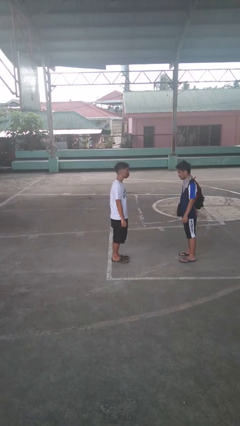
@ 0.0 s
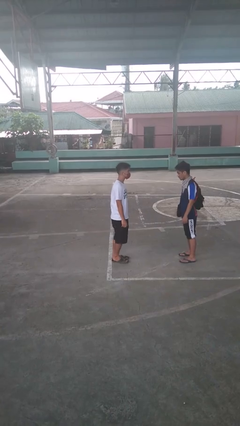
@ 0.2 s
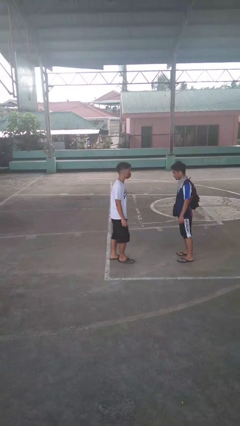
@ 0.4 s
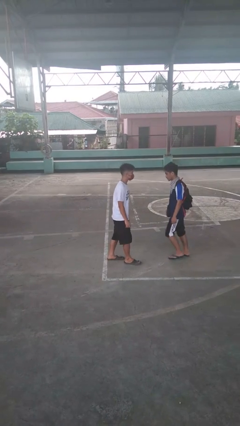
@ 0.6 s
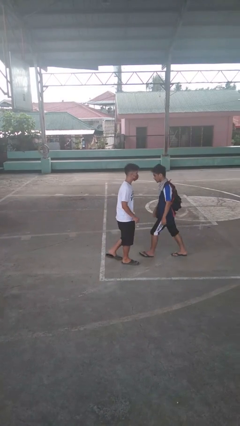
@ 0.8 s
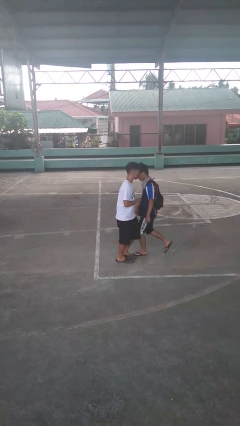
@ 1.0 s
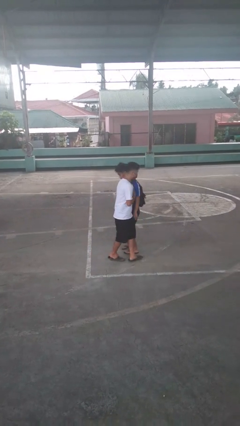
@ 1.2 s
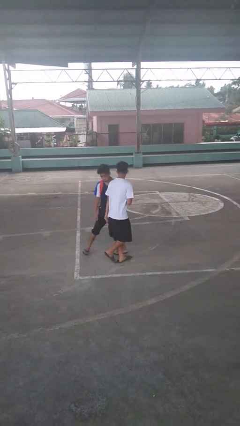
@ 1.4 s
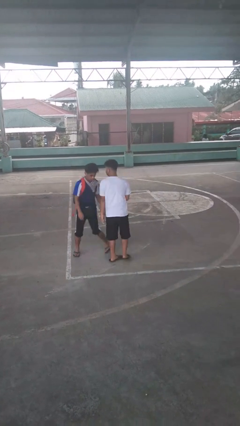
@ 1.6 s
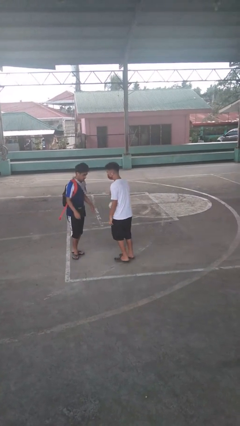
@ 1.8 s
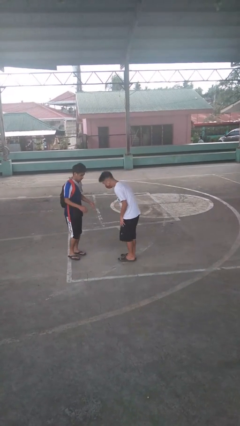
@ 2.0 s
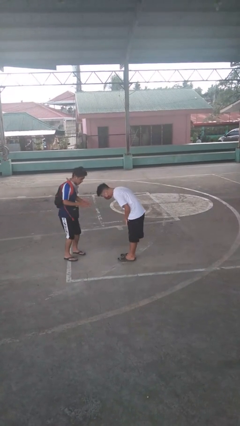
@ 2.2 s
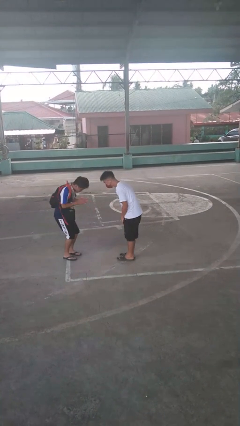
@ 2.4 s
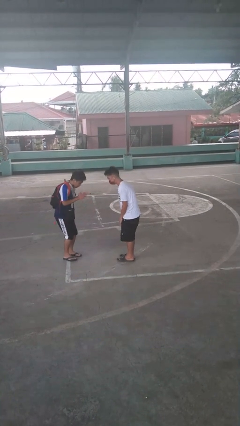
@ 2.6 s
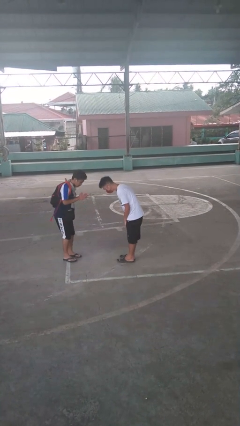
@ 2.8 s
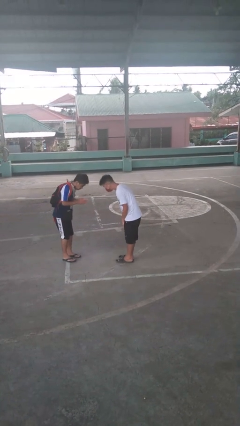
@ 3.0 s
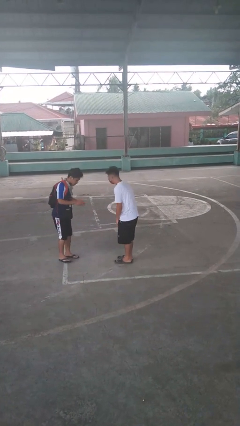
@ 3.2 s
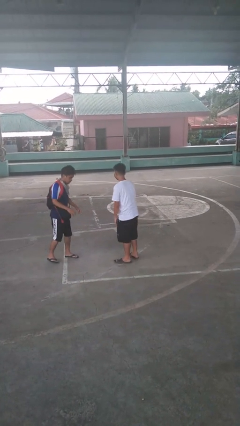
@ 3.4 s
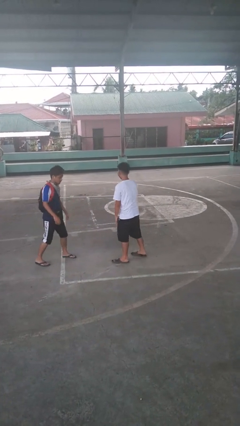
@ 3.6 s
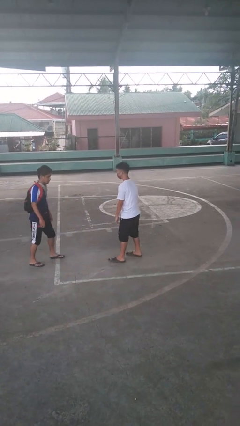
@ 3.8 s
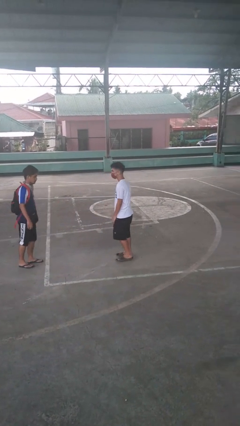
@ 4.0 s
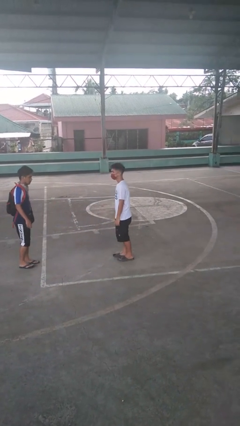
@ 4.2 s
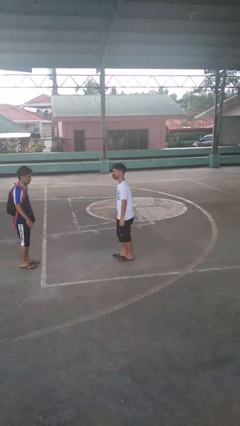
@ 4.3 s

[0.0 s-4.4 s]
person bumps into person

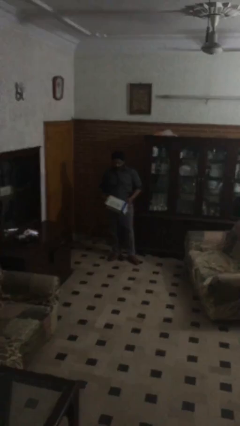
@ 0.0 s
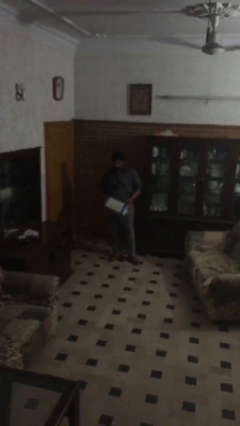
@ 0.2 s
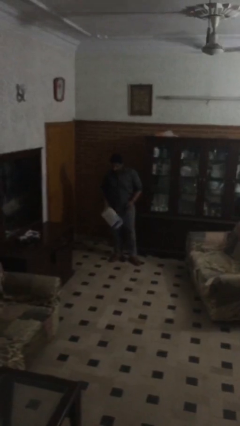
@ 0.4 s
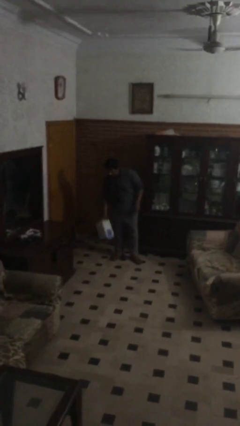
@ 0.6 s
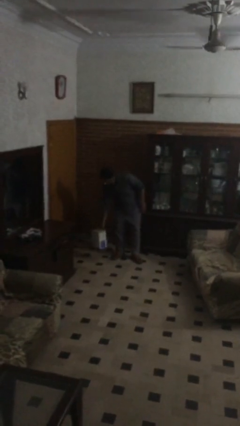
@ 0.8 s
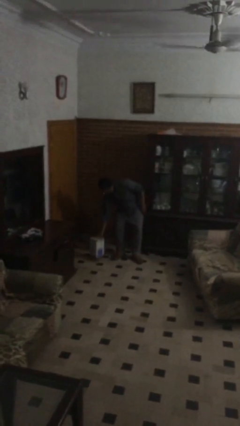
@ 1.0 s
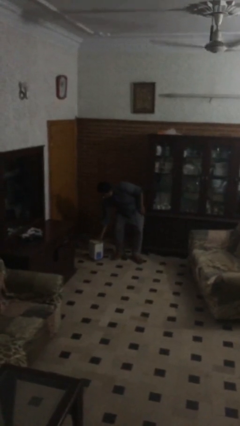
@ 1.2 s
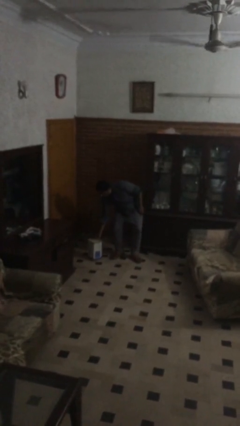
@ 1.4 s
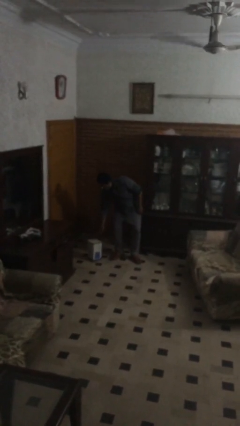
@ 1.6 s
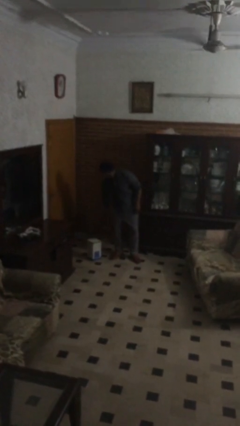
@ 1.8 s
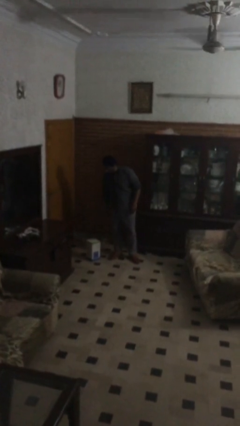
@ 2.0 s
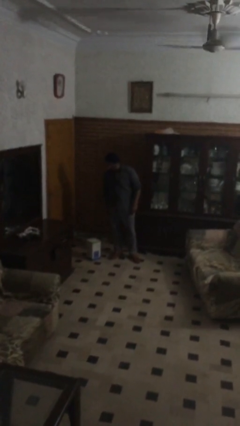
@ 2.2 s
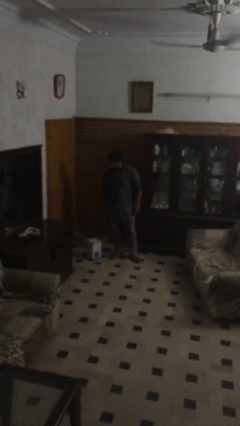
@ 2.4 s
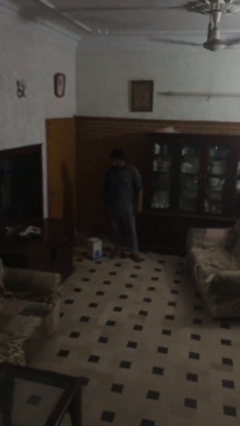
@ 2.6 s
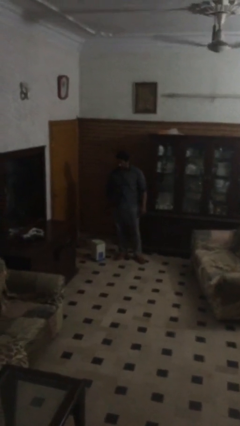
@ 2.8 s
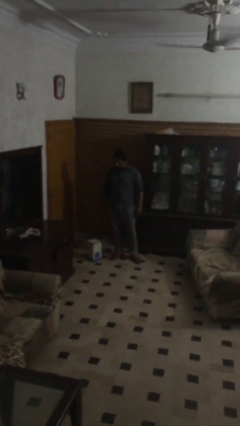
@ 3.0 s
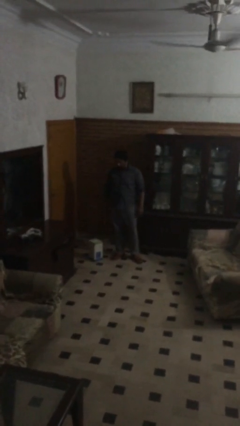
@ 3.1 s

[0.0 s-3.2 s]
person puts down object on floor

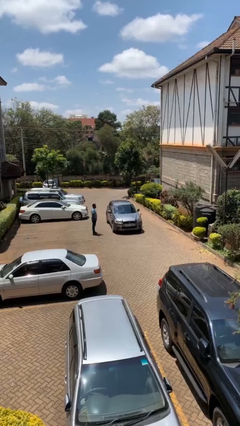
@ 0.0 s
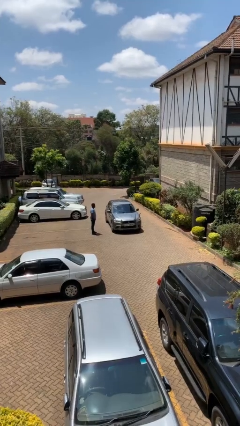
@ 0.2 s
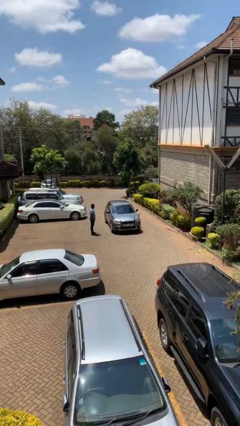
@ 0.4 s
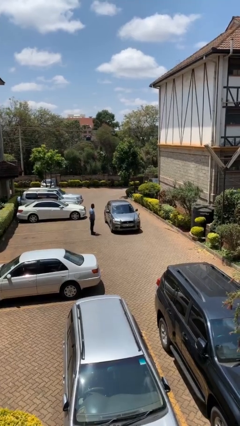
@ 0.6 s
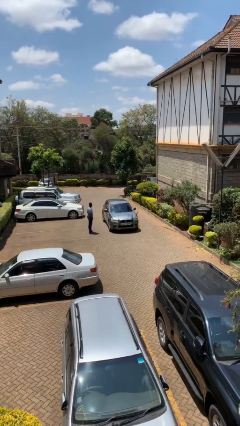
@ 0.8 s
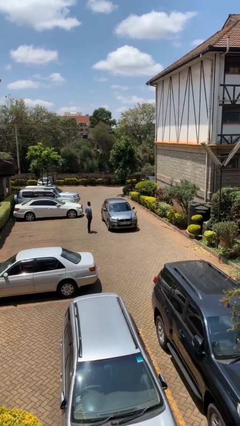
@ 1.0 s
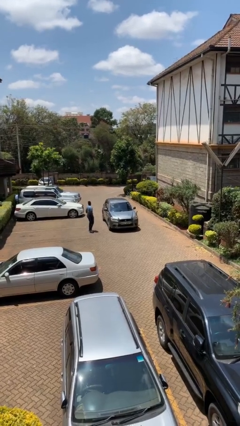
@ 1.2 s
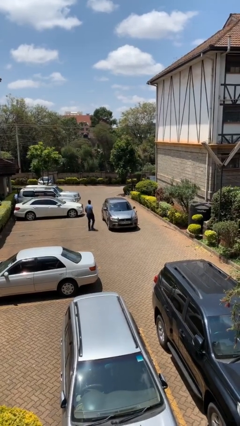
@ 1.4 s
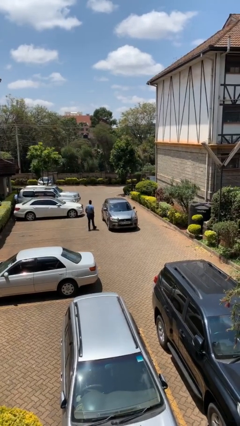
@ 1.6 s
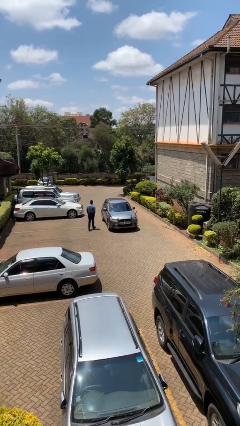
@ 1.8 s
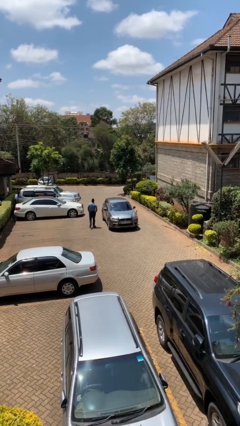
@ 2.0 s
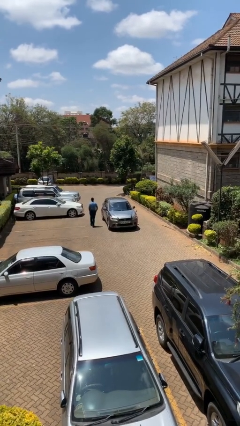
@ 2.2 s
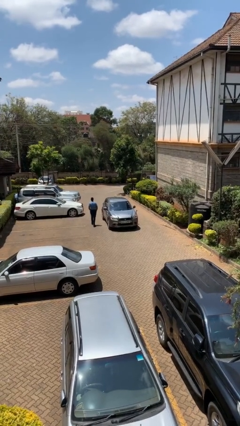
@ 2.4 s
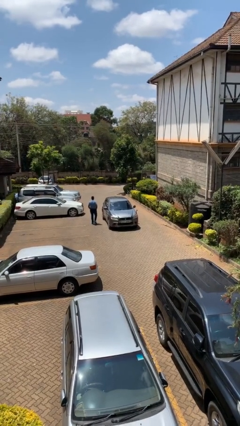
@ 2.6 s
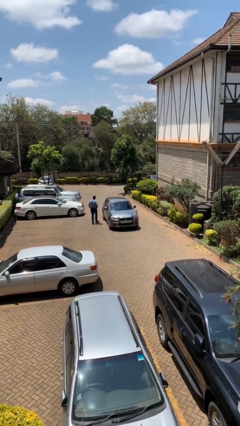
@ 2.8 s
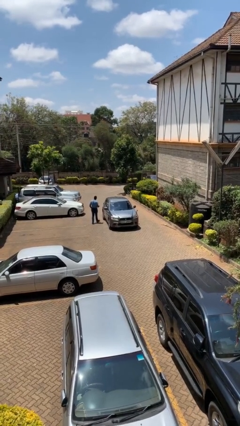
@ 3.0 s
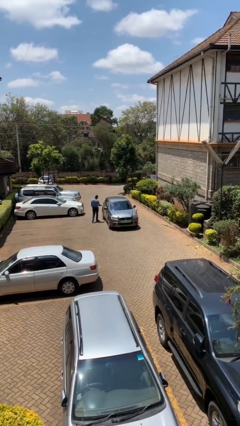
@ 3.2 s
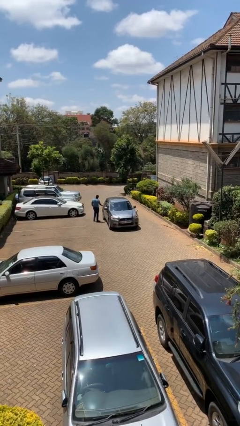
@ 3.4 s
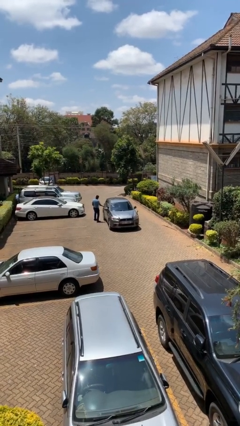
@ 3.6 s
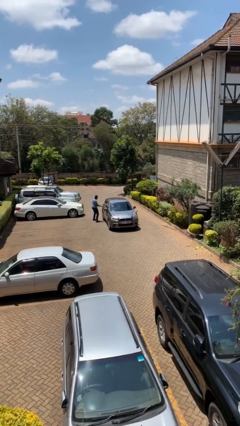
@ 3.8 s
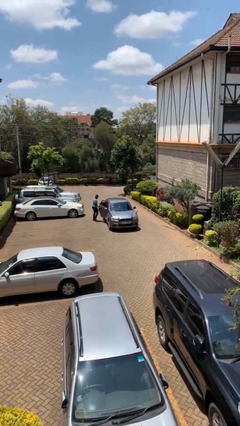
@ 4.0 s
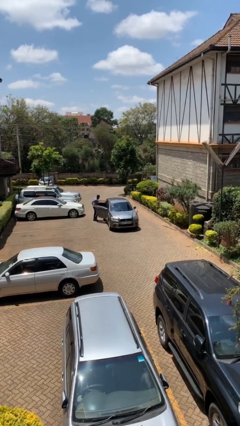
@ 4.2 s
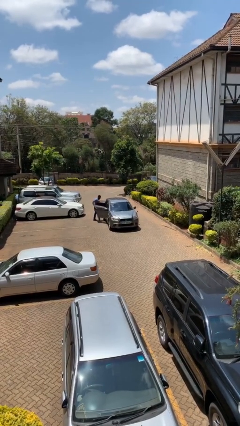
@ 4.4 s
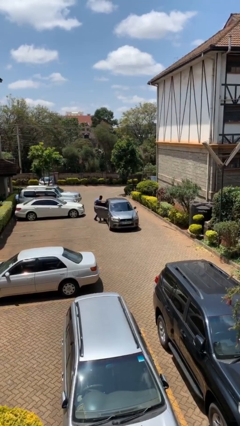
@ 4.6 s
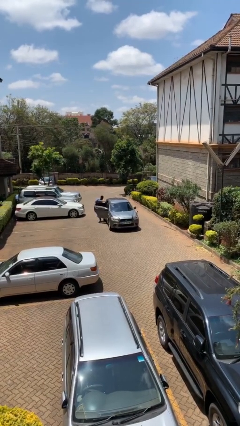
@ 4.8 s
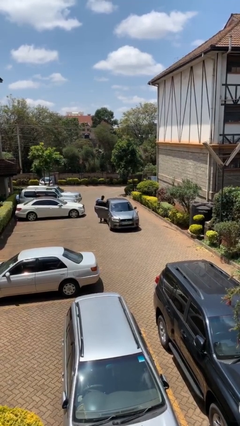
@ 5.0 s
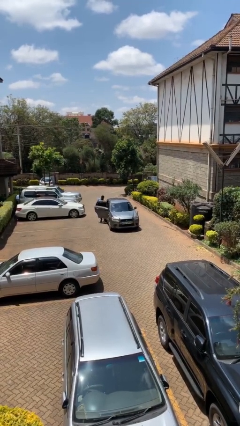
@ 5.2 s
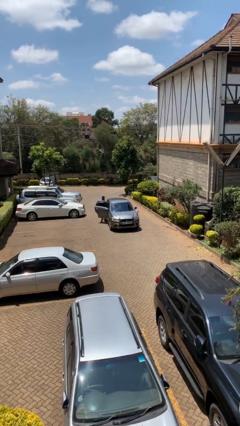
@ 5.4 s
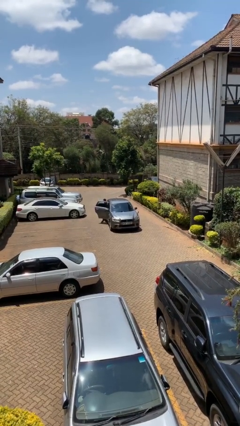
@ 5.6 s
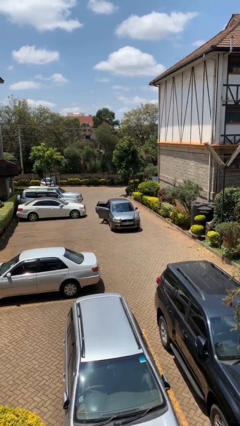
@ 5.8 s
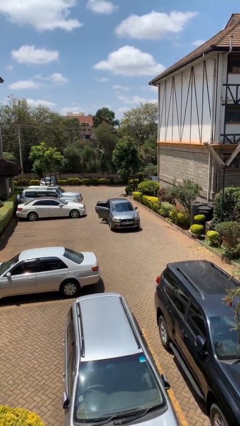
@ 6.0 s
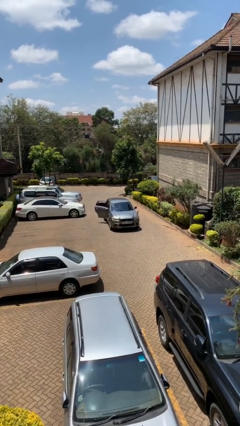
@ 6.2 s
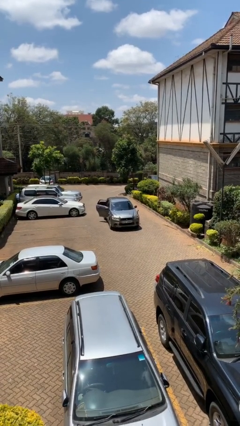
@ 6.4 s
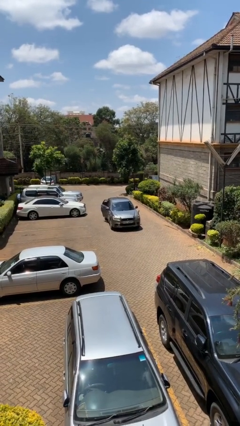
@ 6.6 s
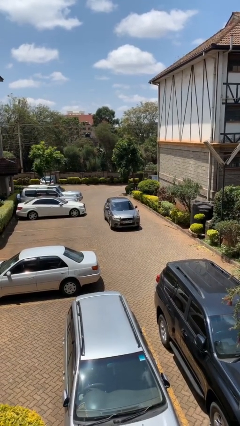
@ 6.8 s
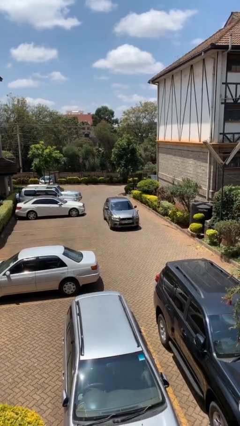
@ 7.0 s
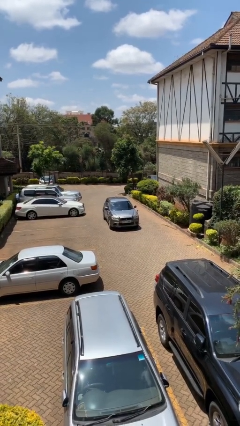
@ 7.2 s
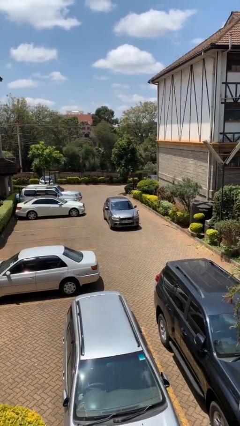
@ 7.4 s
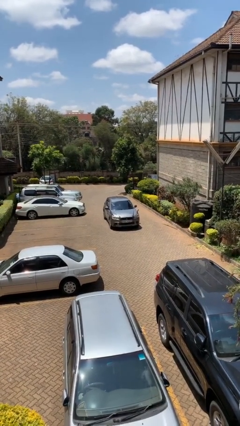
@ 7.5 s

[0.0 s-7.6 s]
car picks up person

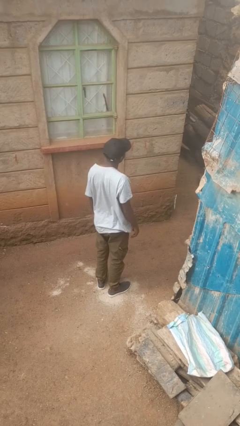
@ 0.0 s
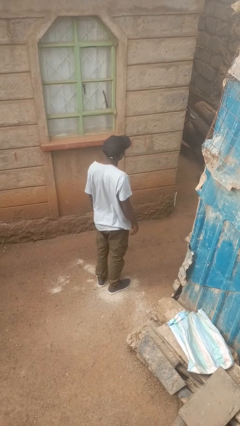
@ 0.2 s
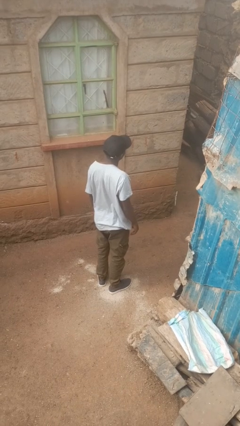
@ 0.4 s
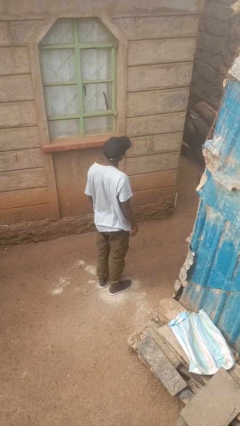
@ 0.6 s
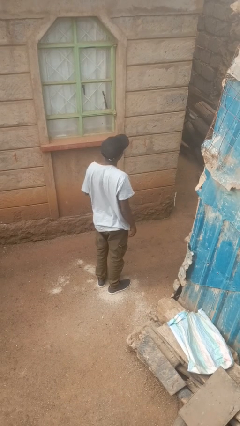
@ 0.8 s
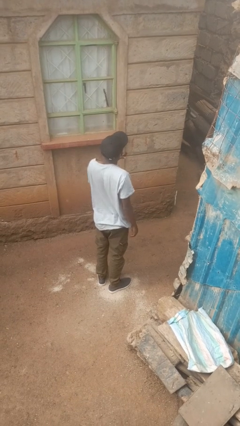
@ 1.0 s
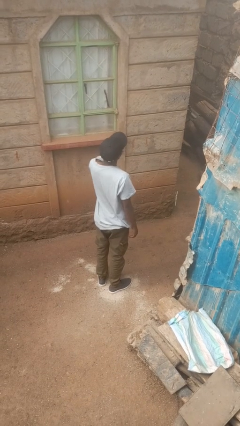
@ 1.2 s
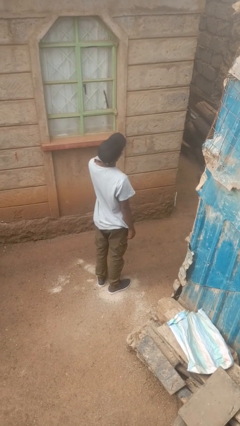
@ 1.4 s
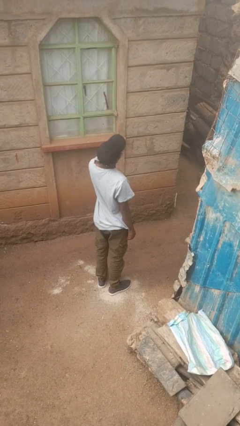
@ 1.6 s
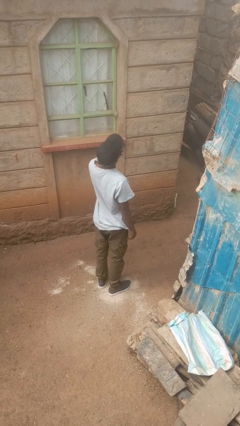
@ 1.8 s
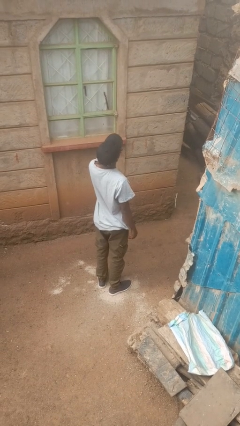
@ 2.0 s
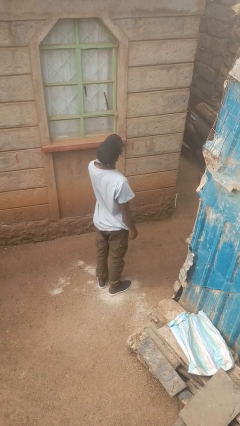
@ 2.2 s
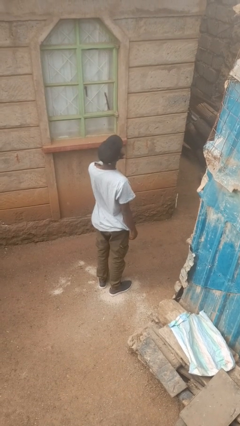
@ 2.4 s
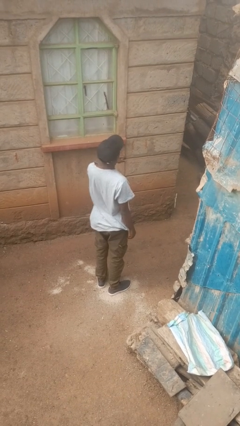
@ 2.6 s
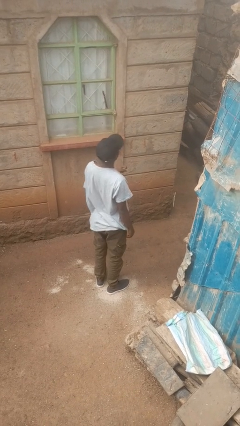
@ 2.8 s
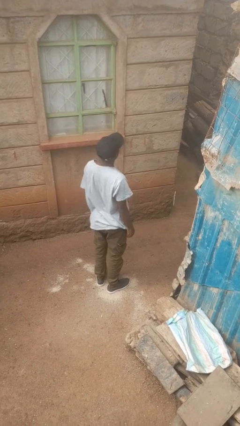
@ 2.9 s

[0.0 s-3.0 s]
person yawns
